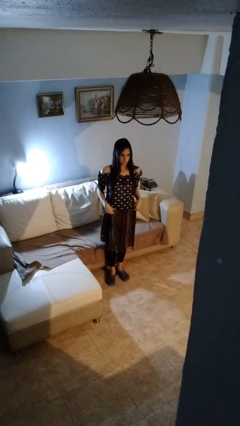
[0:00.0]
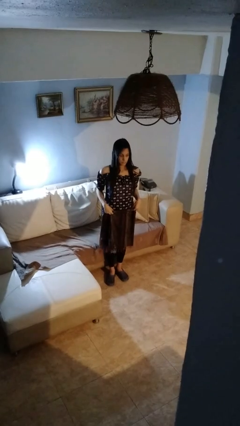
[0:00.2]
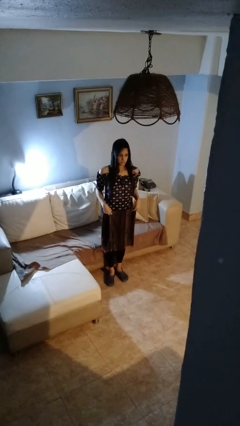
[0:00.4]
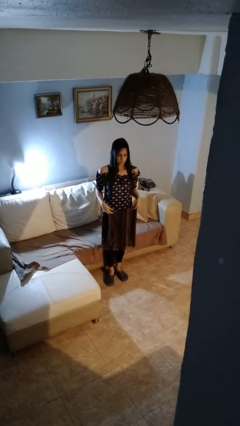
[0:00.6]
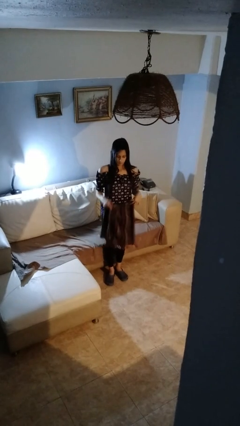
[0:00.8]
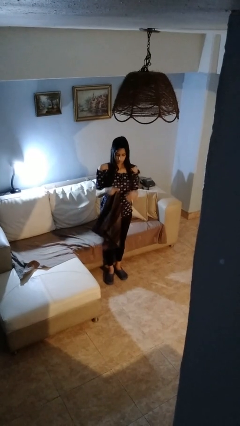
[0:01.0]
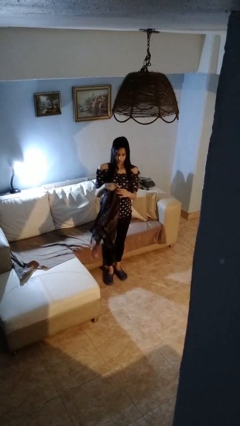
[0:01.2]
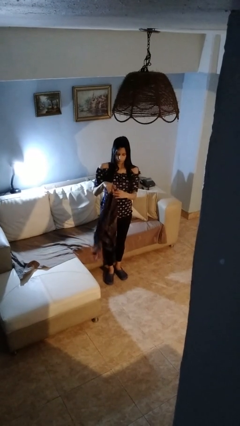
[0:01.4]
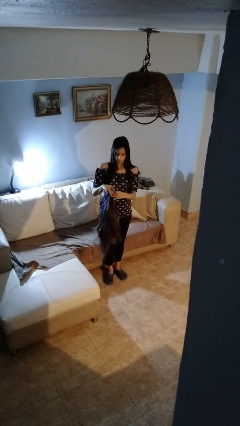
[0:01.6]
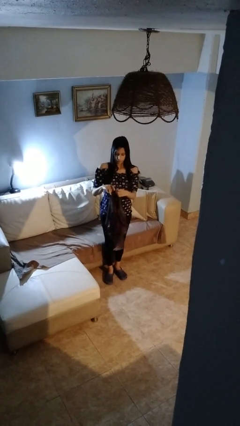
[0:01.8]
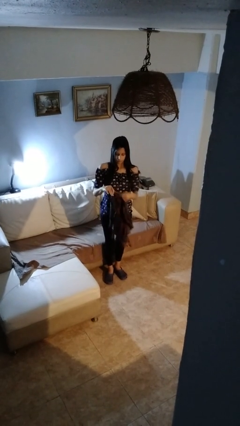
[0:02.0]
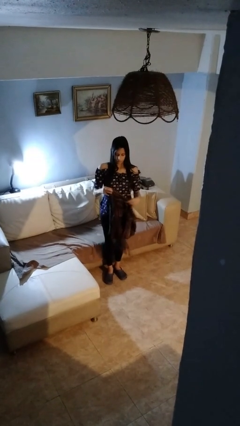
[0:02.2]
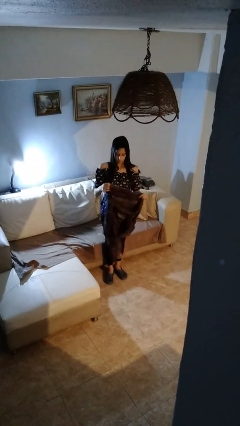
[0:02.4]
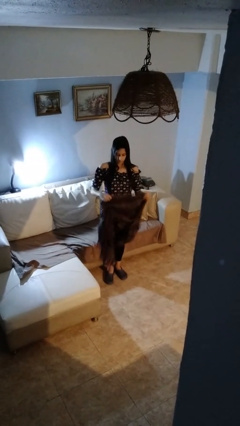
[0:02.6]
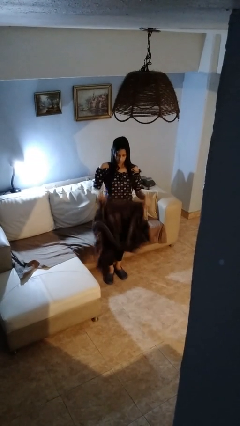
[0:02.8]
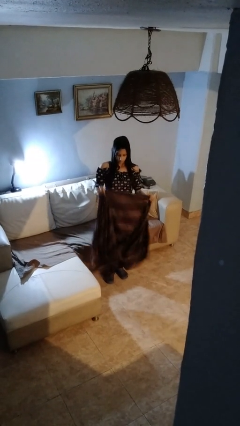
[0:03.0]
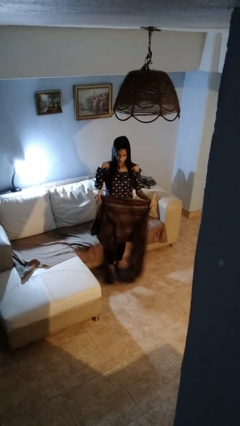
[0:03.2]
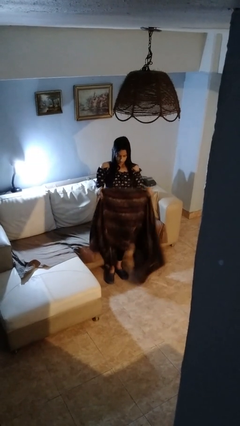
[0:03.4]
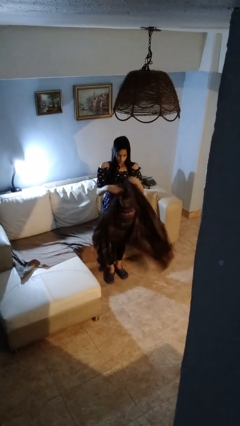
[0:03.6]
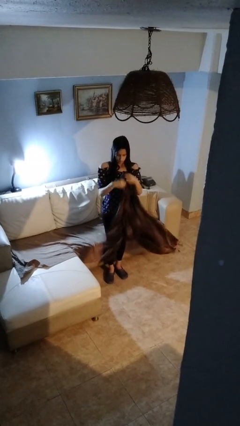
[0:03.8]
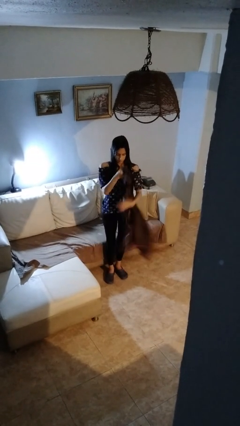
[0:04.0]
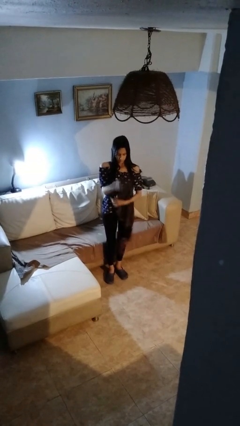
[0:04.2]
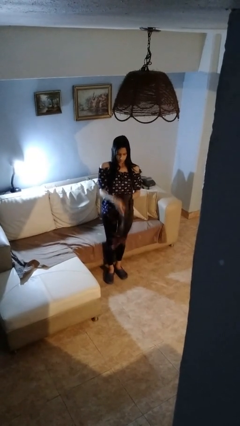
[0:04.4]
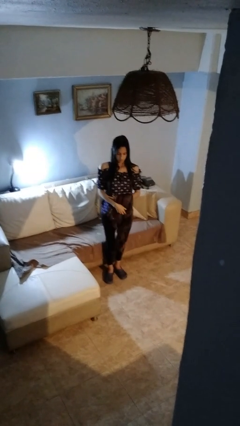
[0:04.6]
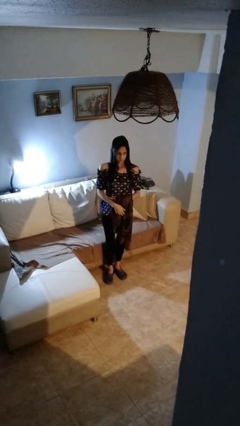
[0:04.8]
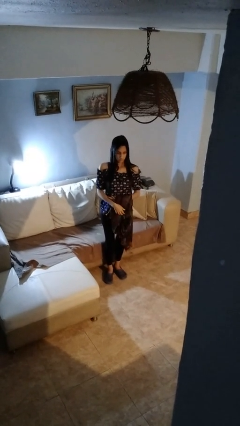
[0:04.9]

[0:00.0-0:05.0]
person unfolds blanket

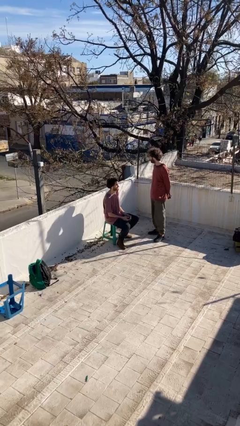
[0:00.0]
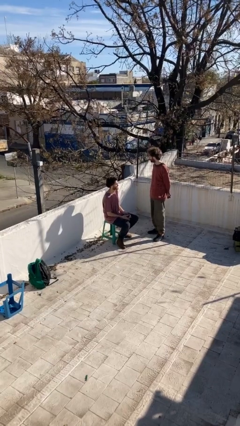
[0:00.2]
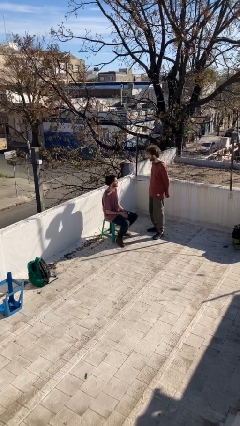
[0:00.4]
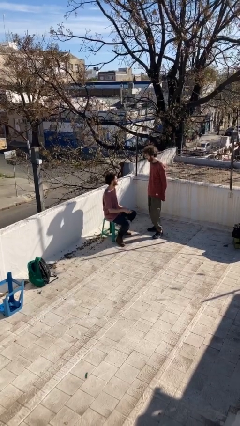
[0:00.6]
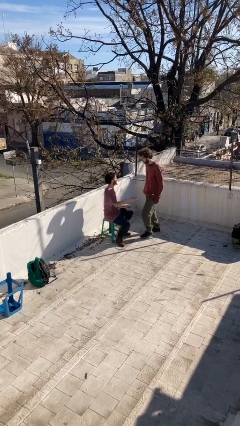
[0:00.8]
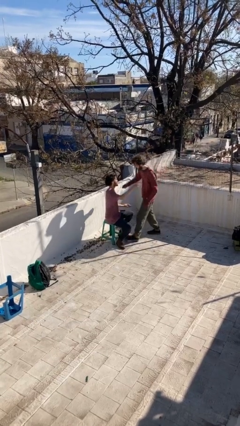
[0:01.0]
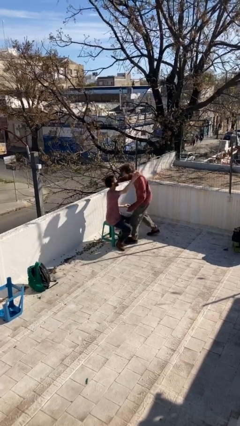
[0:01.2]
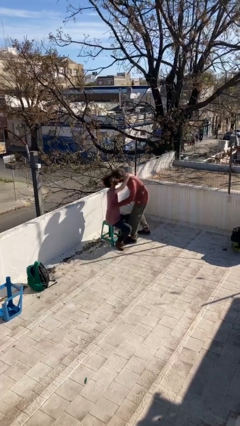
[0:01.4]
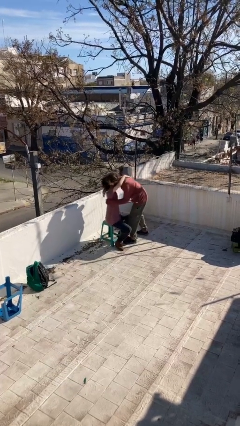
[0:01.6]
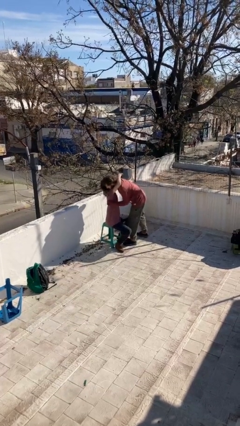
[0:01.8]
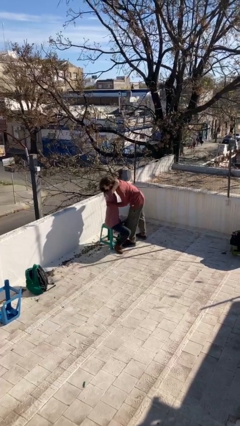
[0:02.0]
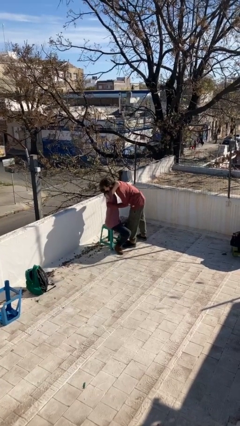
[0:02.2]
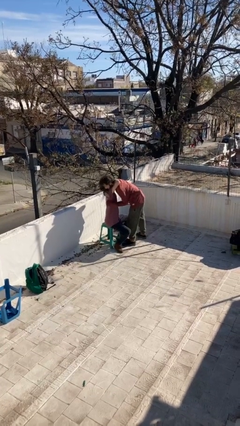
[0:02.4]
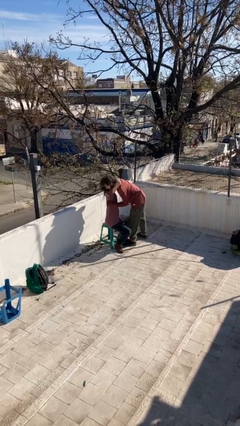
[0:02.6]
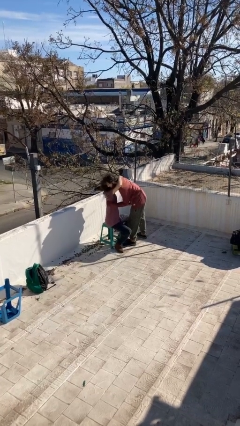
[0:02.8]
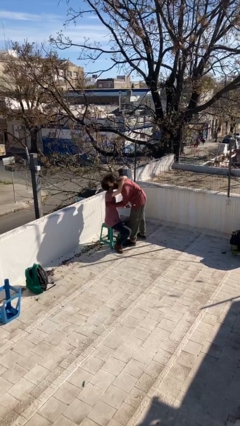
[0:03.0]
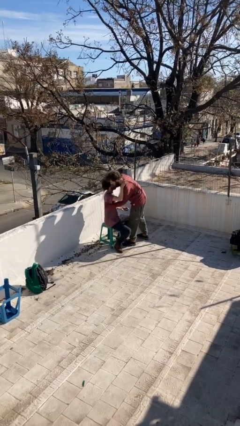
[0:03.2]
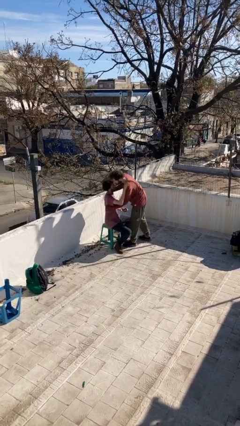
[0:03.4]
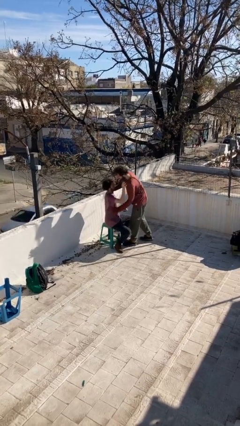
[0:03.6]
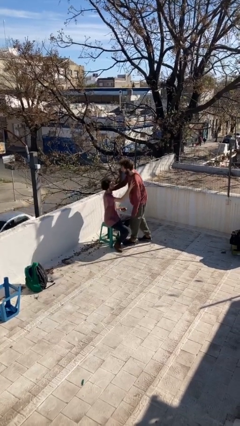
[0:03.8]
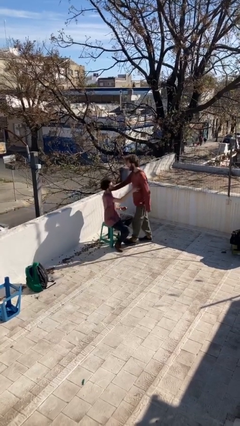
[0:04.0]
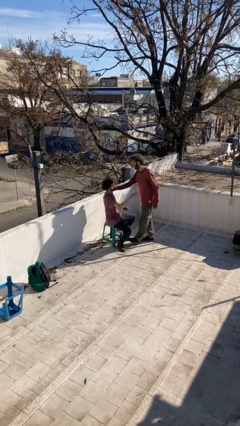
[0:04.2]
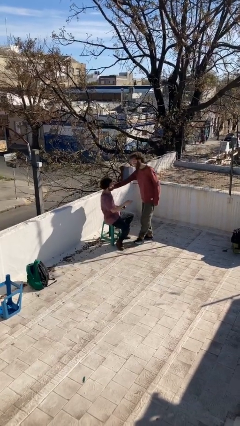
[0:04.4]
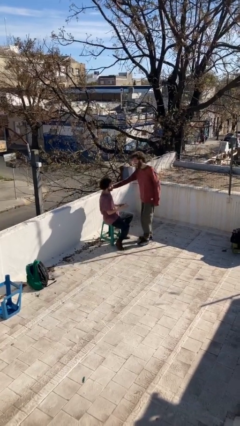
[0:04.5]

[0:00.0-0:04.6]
person embraces person

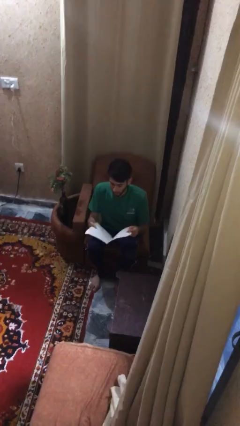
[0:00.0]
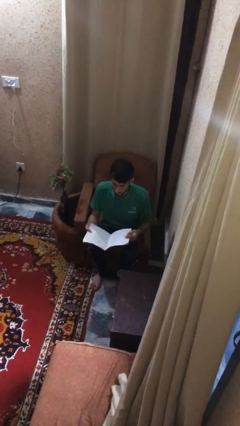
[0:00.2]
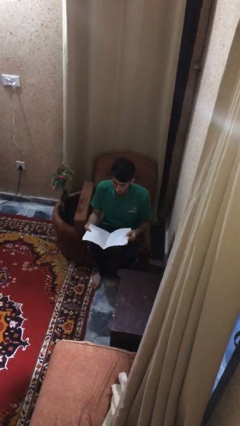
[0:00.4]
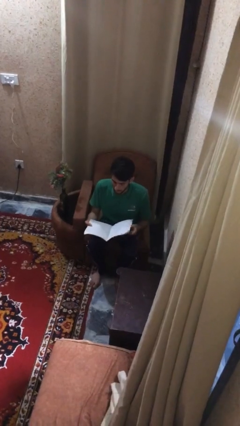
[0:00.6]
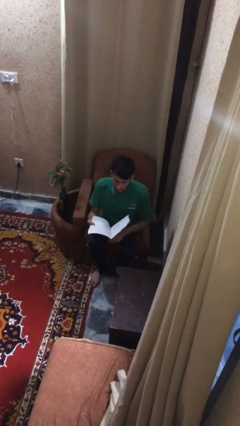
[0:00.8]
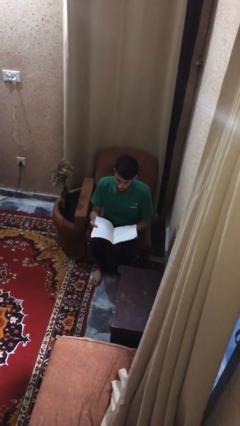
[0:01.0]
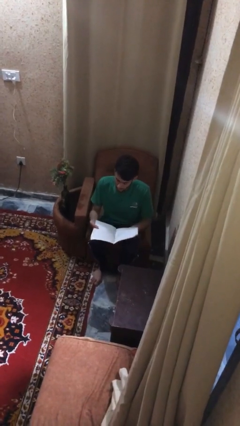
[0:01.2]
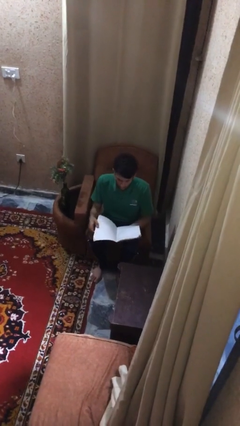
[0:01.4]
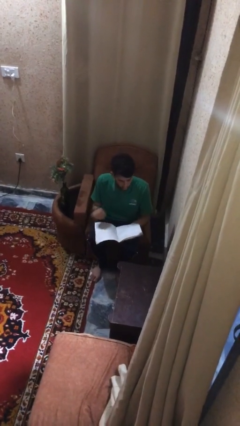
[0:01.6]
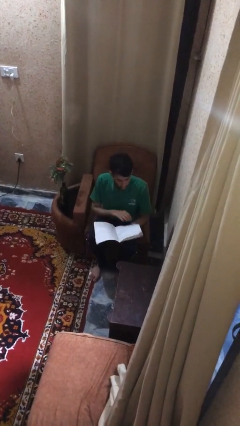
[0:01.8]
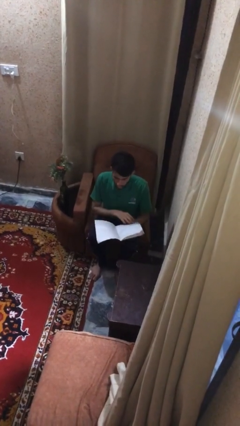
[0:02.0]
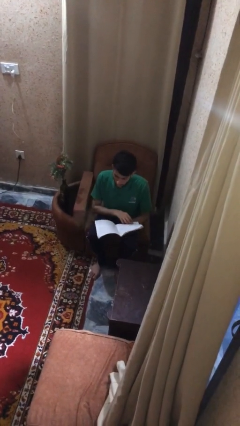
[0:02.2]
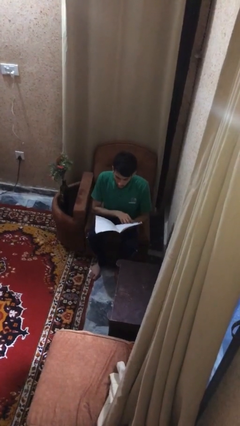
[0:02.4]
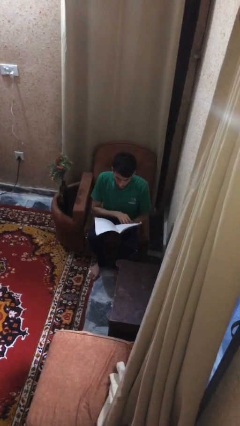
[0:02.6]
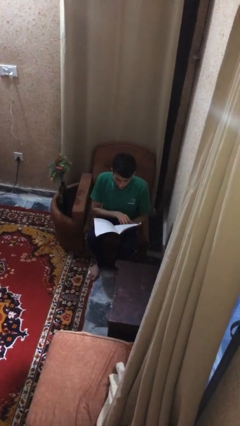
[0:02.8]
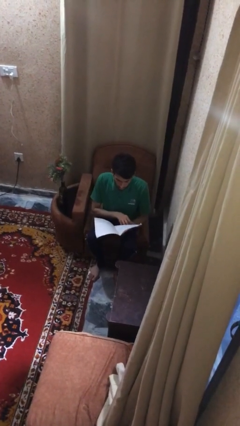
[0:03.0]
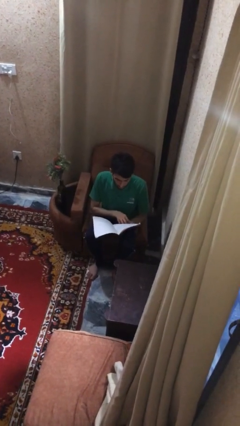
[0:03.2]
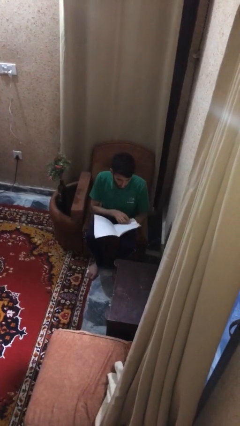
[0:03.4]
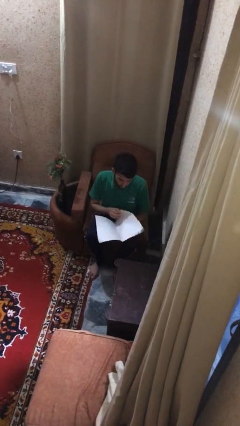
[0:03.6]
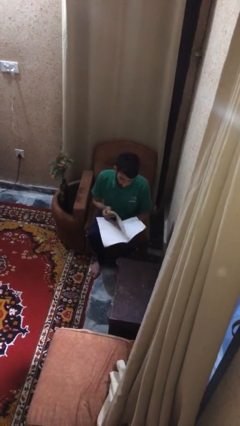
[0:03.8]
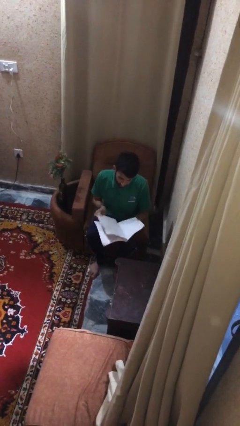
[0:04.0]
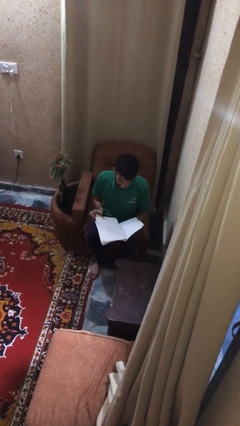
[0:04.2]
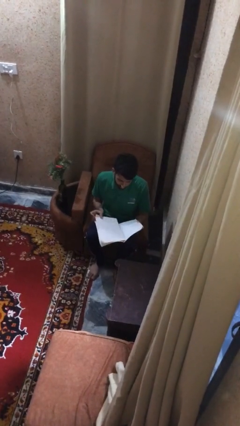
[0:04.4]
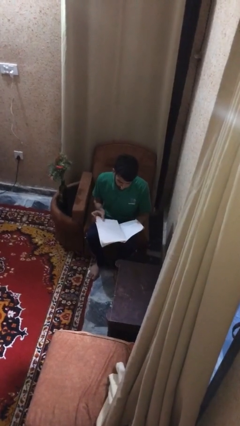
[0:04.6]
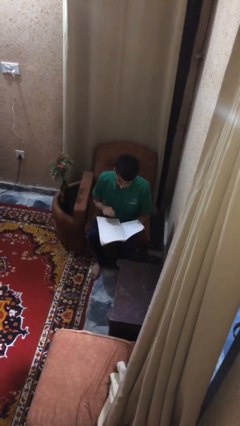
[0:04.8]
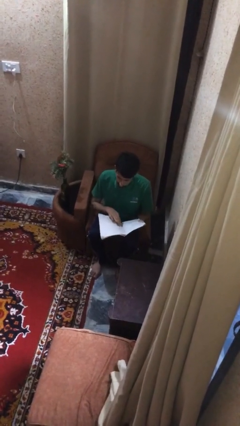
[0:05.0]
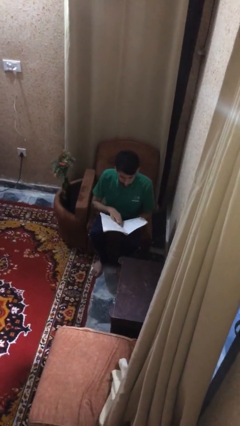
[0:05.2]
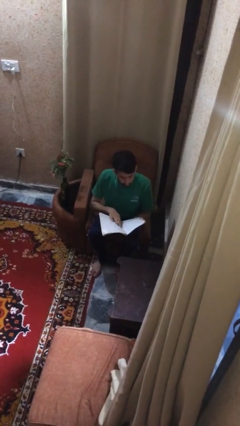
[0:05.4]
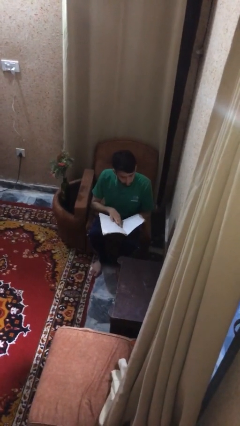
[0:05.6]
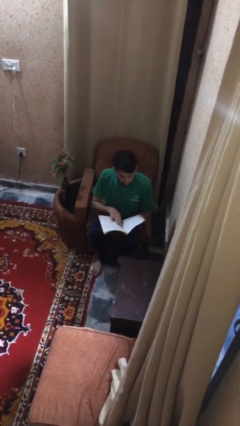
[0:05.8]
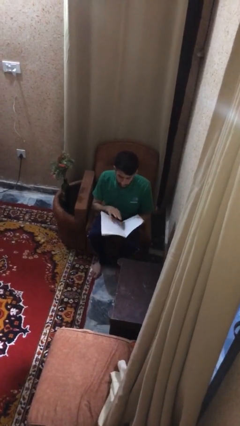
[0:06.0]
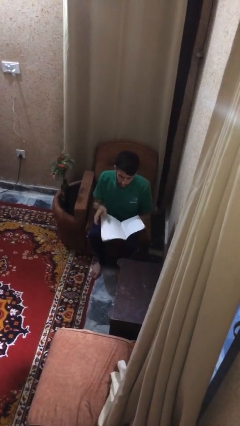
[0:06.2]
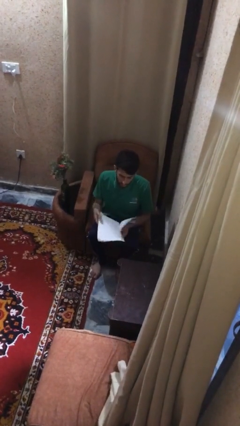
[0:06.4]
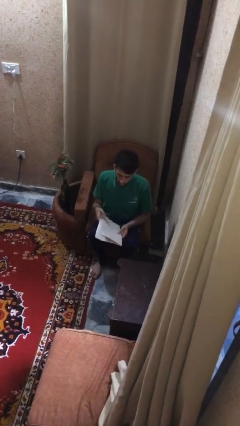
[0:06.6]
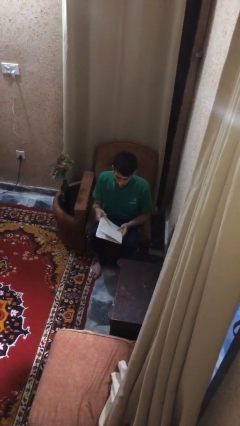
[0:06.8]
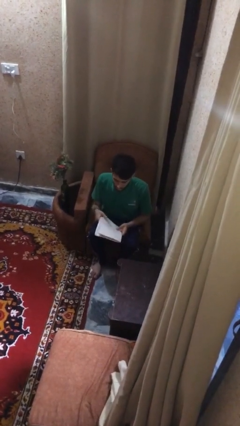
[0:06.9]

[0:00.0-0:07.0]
person reads document

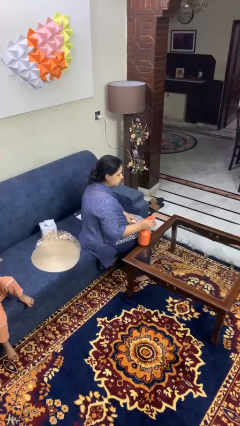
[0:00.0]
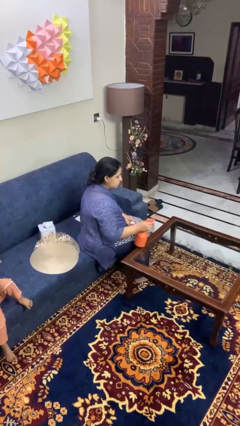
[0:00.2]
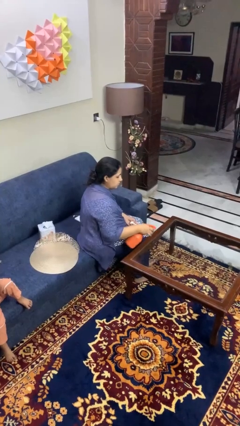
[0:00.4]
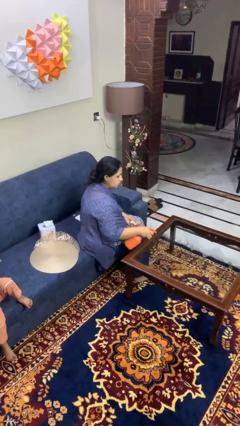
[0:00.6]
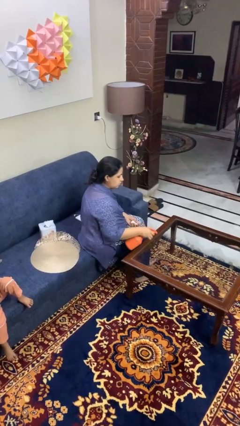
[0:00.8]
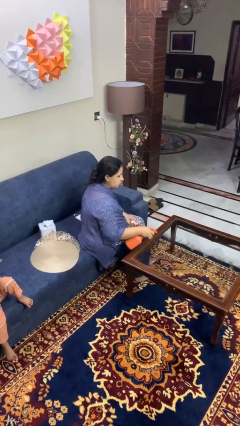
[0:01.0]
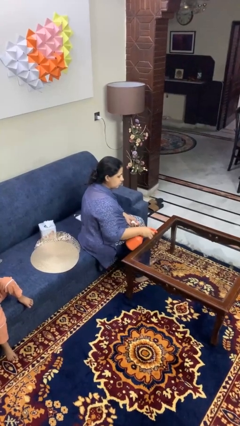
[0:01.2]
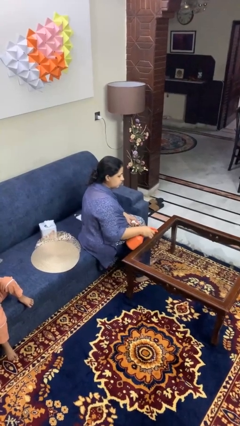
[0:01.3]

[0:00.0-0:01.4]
person sprays from bottle
